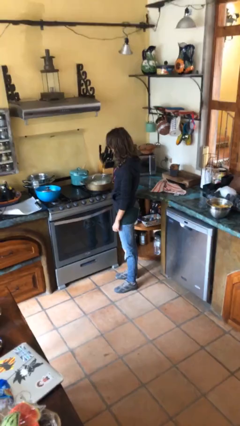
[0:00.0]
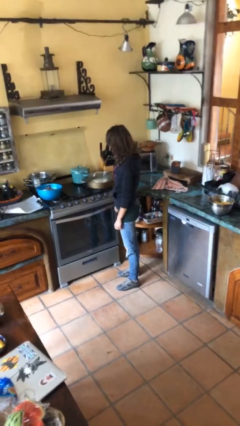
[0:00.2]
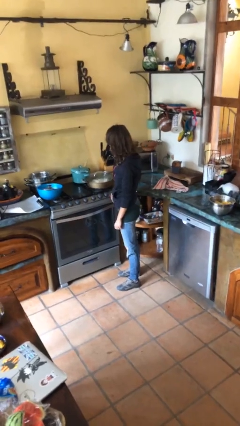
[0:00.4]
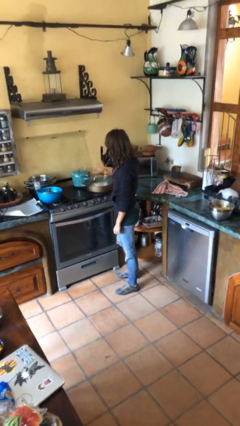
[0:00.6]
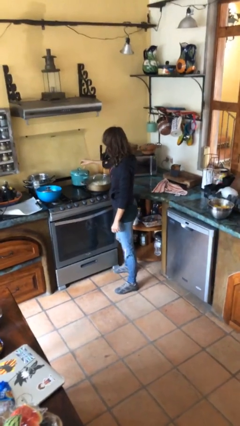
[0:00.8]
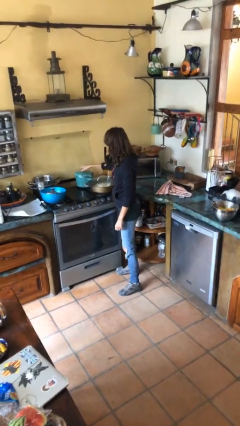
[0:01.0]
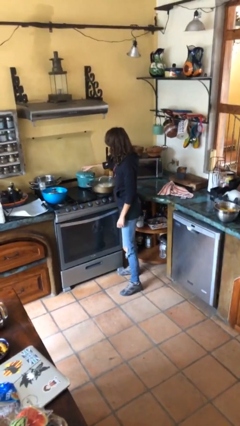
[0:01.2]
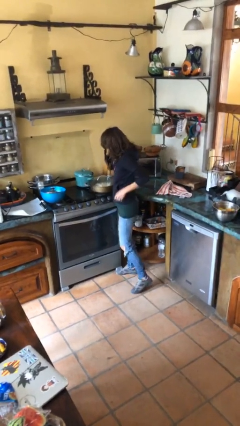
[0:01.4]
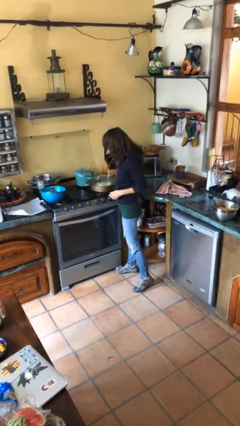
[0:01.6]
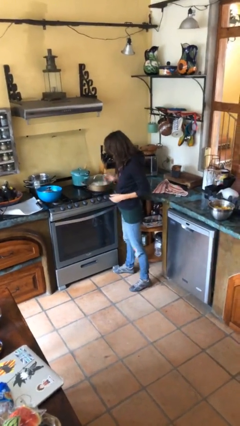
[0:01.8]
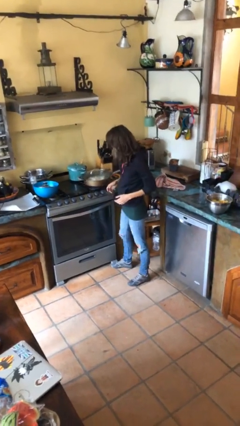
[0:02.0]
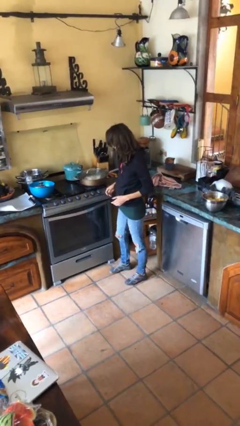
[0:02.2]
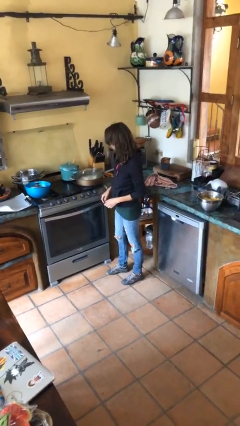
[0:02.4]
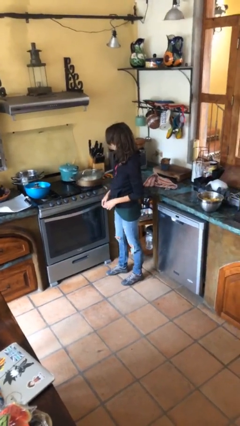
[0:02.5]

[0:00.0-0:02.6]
person burns hand

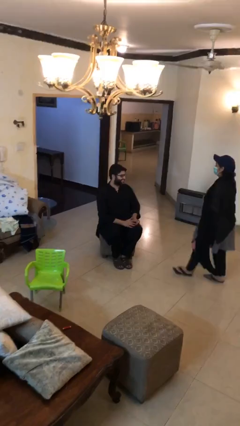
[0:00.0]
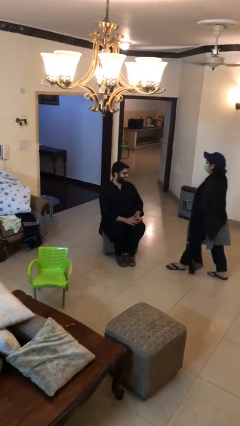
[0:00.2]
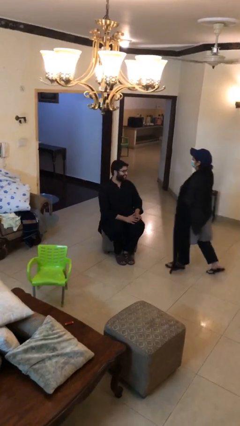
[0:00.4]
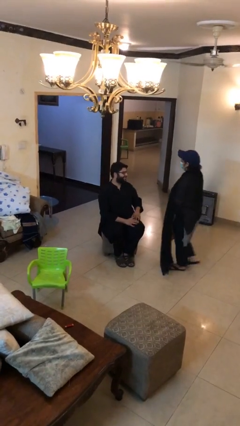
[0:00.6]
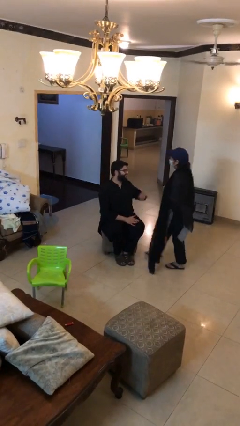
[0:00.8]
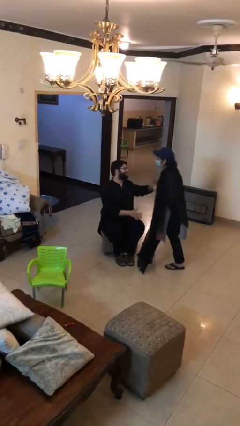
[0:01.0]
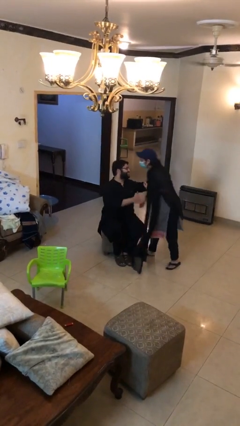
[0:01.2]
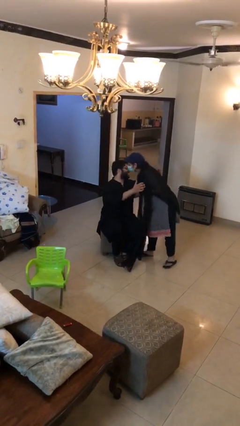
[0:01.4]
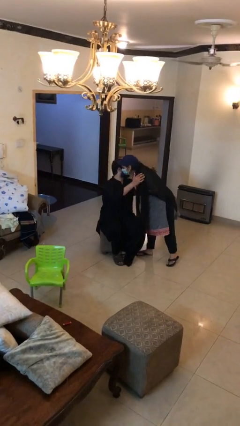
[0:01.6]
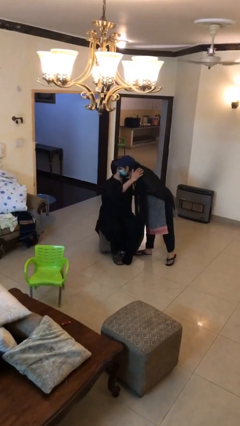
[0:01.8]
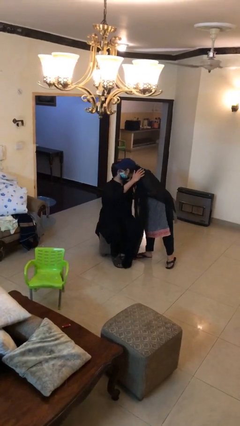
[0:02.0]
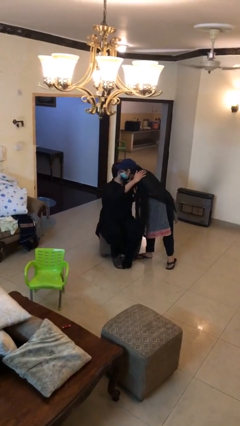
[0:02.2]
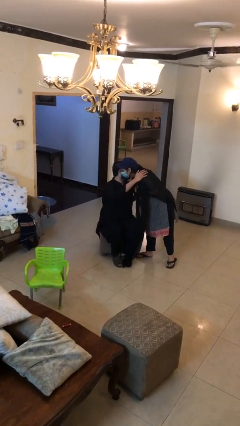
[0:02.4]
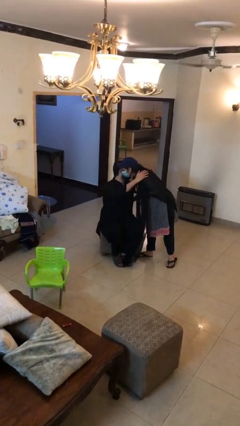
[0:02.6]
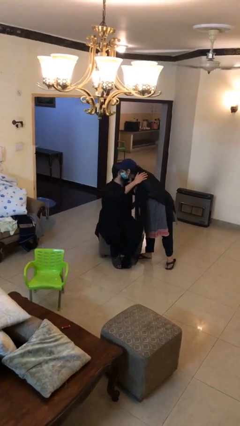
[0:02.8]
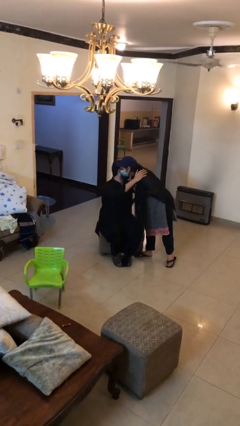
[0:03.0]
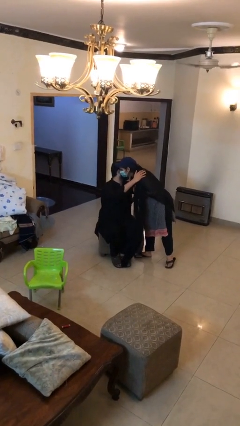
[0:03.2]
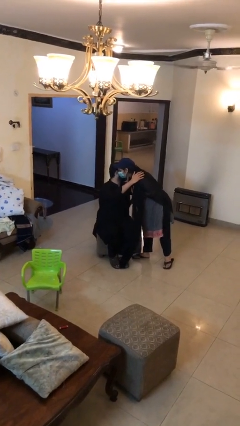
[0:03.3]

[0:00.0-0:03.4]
person embraces person

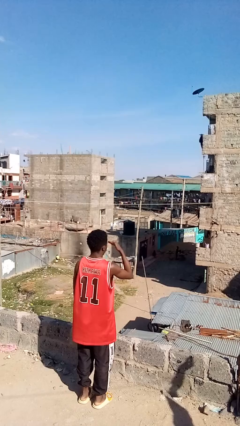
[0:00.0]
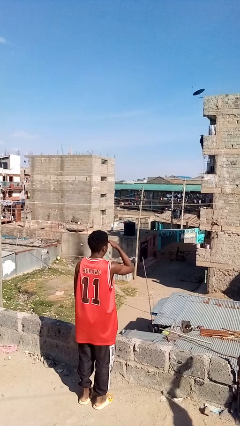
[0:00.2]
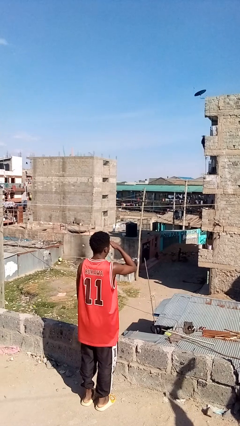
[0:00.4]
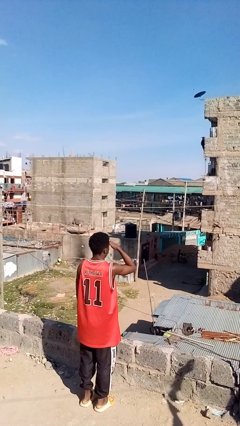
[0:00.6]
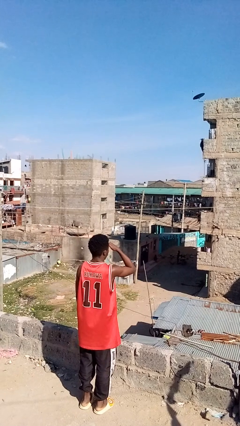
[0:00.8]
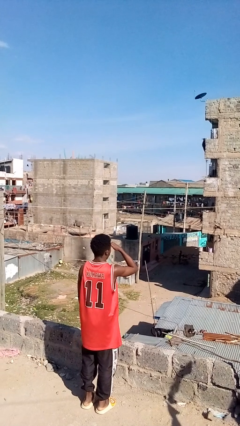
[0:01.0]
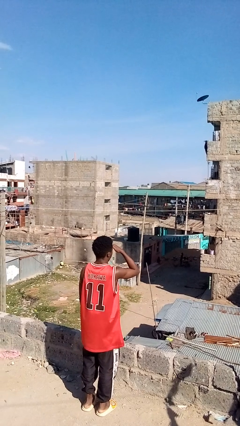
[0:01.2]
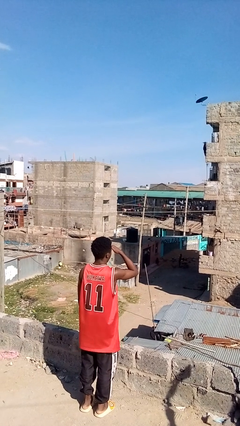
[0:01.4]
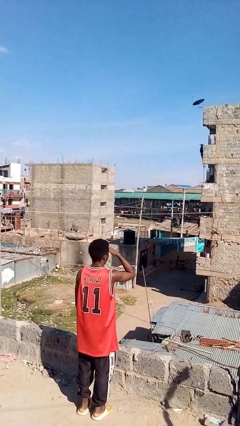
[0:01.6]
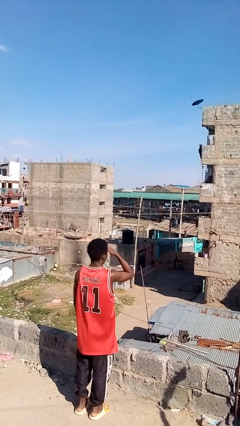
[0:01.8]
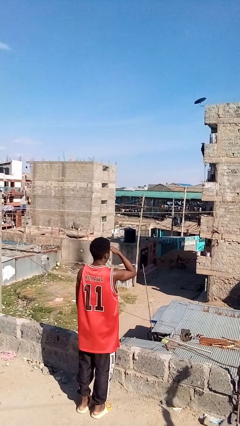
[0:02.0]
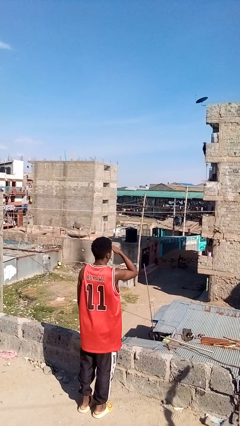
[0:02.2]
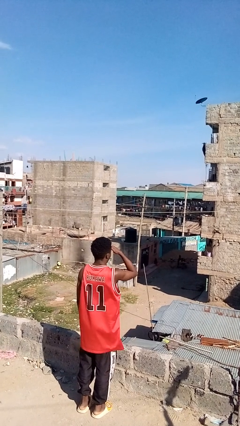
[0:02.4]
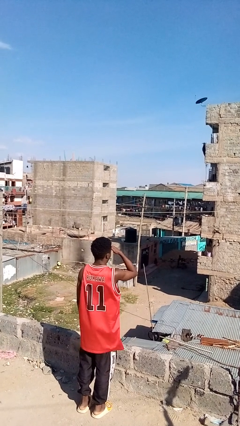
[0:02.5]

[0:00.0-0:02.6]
person shades eyes

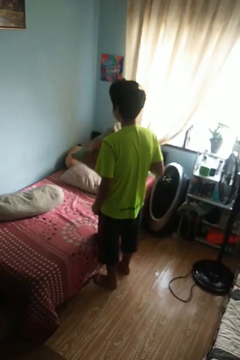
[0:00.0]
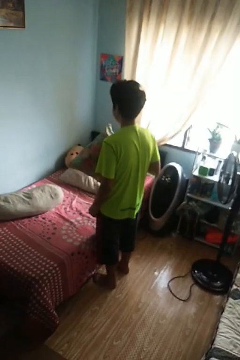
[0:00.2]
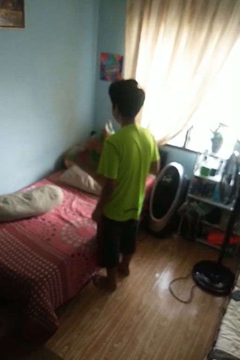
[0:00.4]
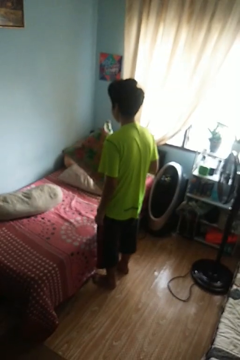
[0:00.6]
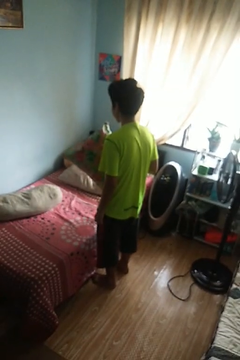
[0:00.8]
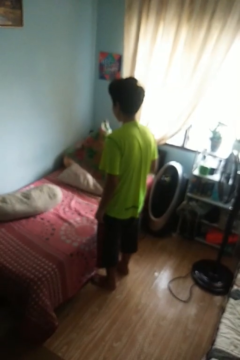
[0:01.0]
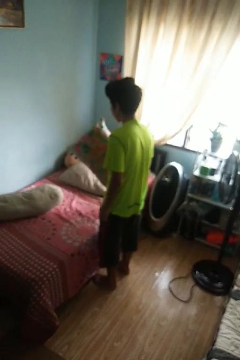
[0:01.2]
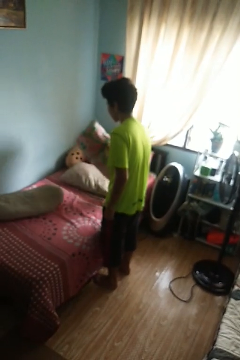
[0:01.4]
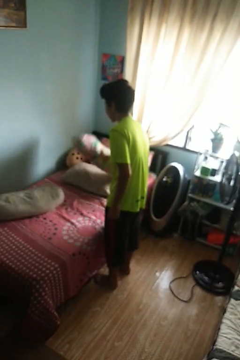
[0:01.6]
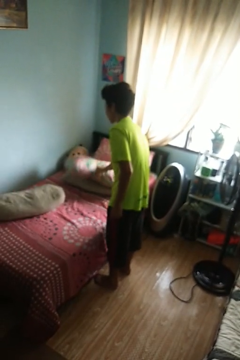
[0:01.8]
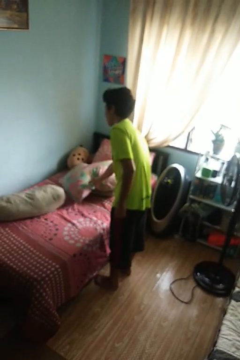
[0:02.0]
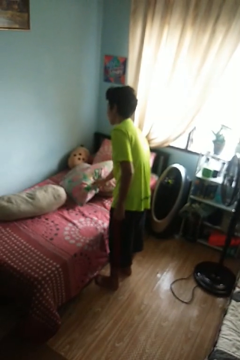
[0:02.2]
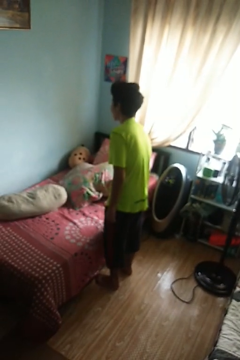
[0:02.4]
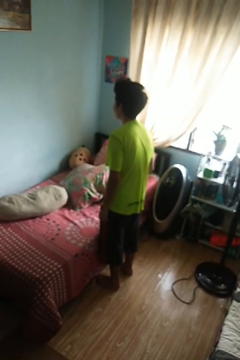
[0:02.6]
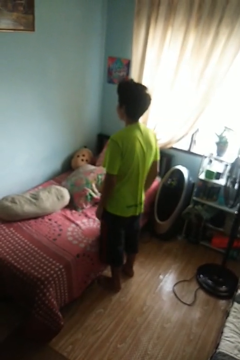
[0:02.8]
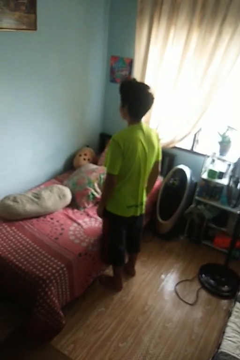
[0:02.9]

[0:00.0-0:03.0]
person puts down object on bed

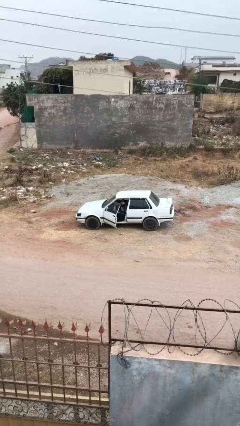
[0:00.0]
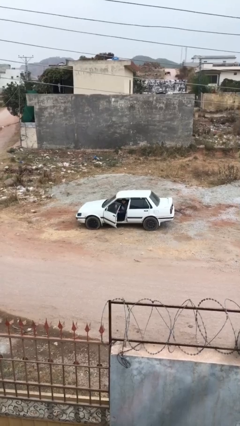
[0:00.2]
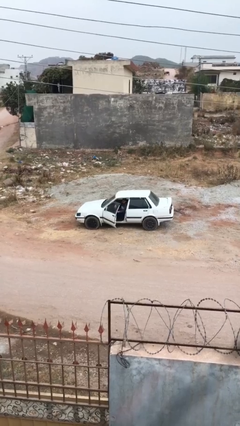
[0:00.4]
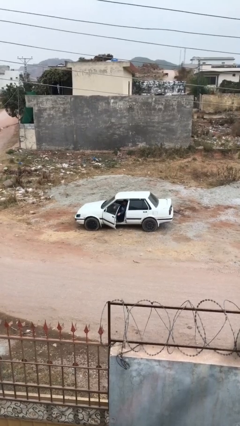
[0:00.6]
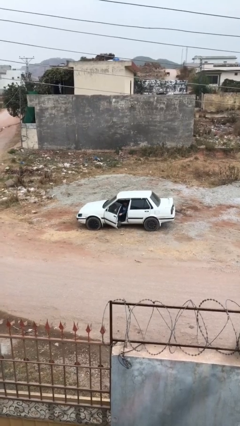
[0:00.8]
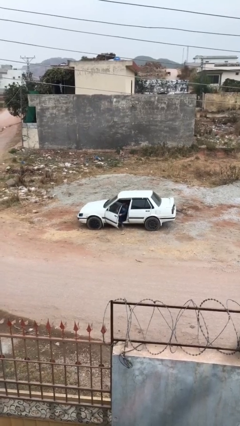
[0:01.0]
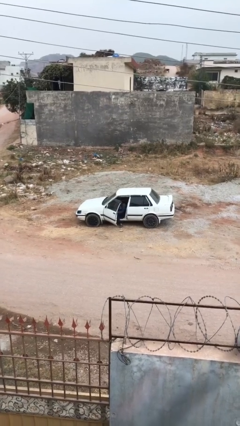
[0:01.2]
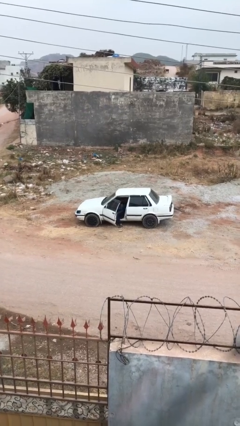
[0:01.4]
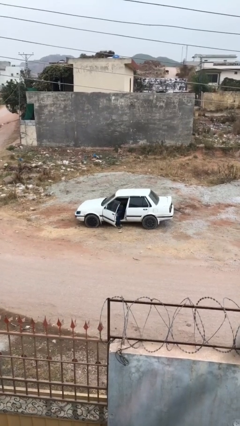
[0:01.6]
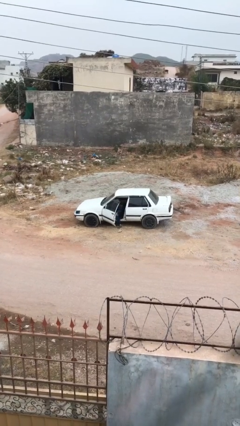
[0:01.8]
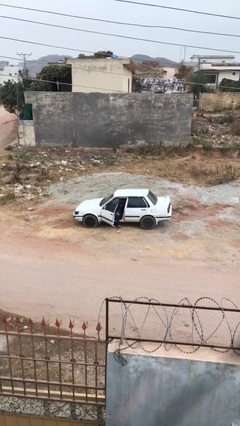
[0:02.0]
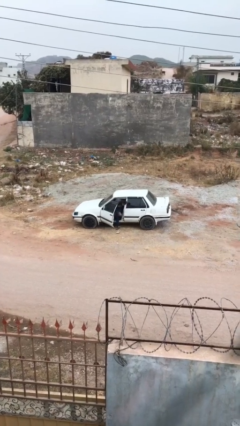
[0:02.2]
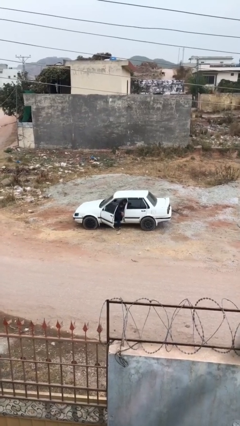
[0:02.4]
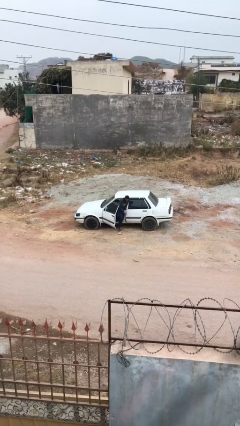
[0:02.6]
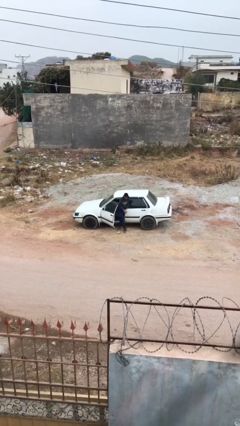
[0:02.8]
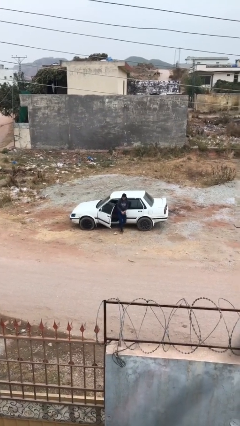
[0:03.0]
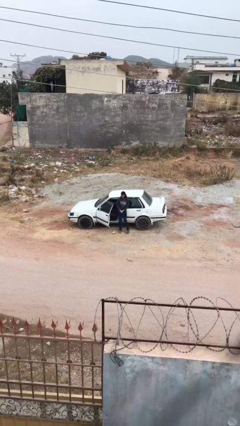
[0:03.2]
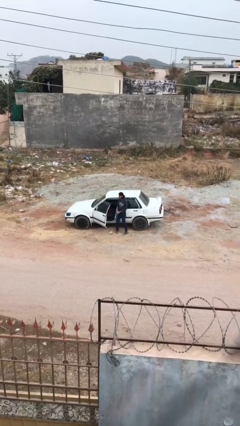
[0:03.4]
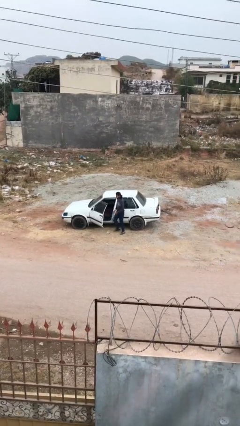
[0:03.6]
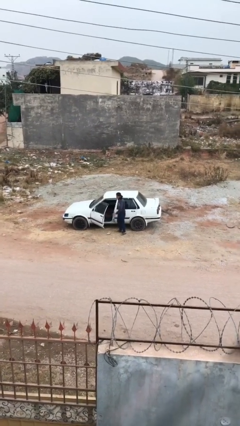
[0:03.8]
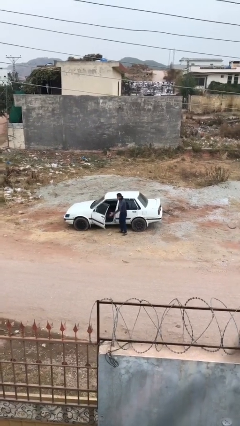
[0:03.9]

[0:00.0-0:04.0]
person exits car

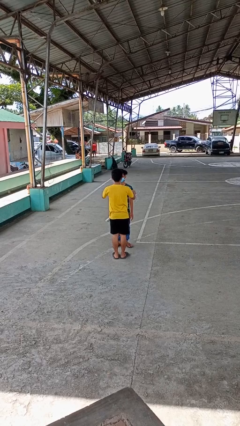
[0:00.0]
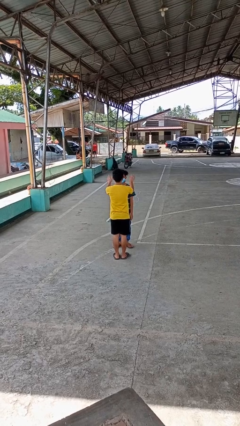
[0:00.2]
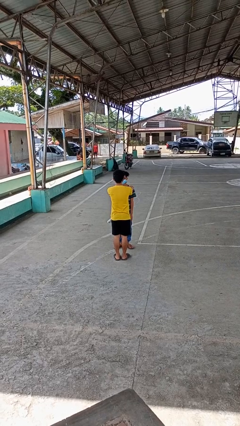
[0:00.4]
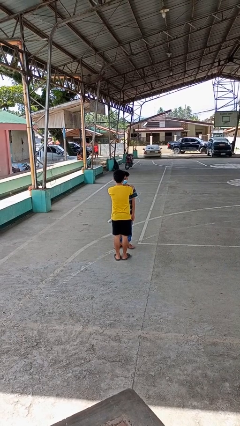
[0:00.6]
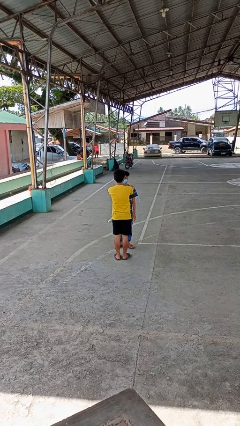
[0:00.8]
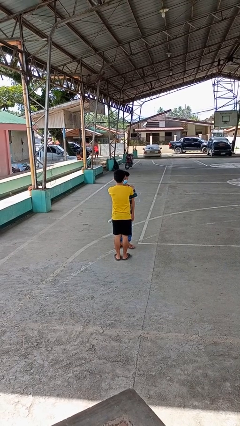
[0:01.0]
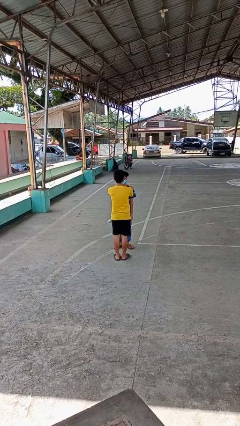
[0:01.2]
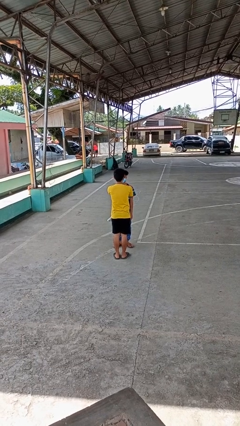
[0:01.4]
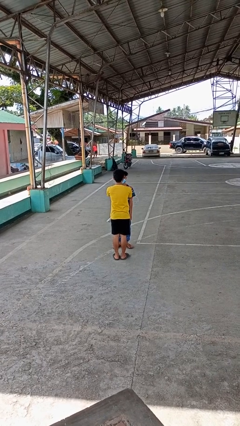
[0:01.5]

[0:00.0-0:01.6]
person grabs person by shoulder

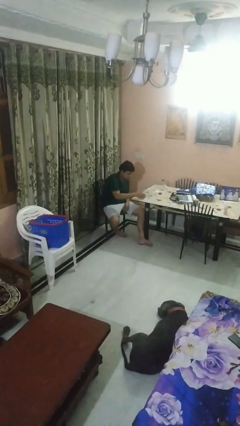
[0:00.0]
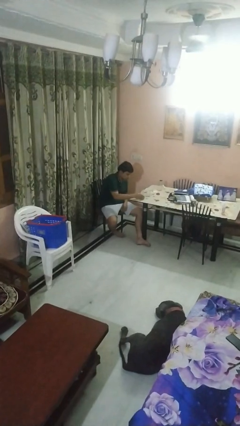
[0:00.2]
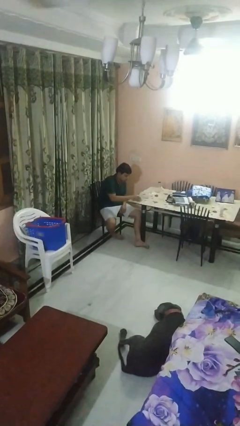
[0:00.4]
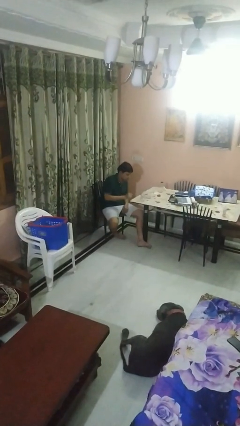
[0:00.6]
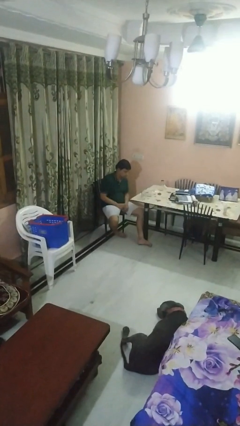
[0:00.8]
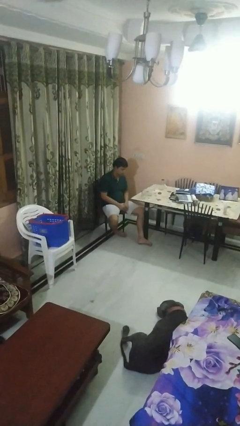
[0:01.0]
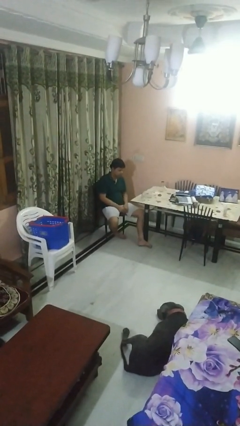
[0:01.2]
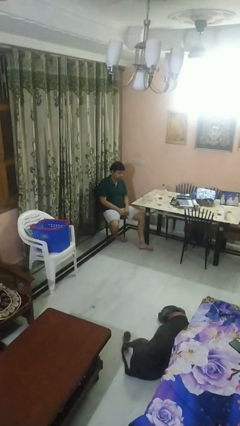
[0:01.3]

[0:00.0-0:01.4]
person puts down object on table
